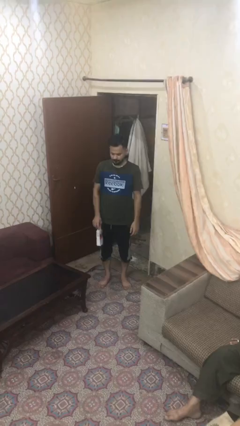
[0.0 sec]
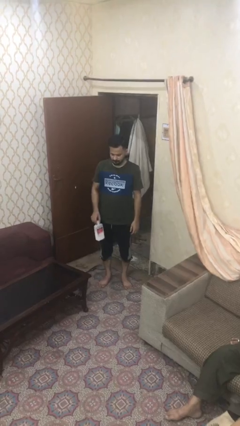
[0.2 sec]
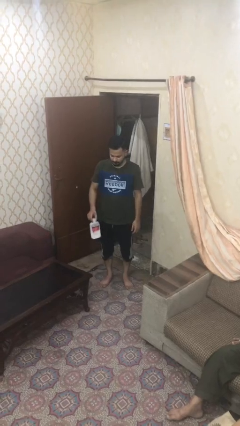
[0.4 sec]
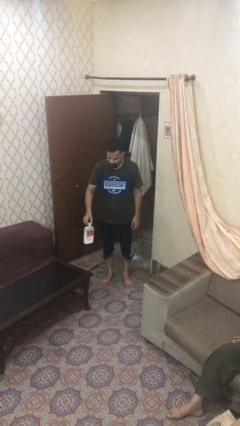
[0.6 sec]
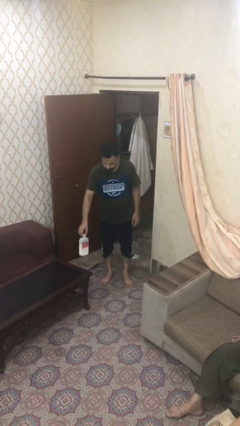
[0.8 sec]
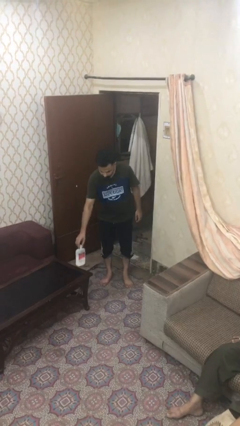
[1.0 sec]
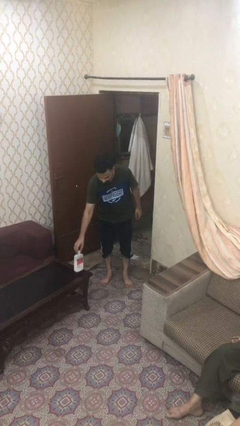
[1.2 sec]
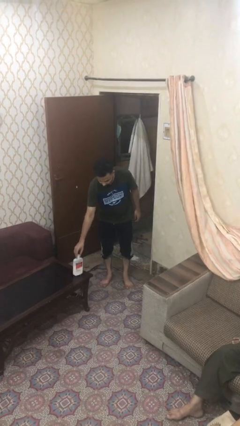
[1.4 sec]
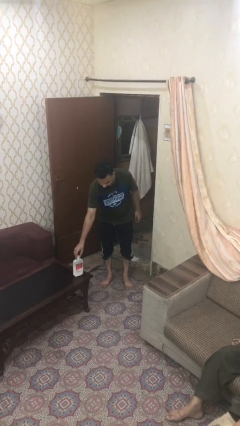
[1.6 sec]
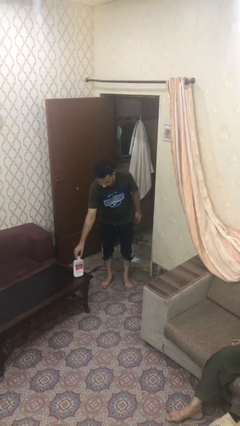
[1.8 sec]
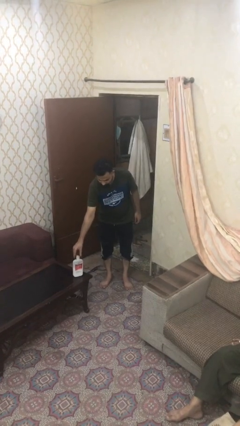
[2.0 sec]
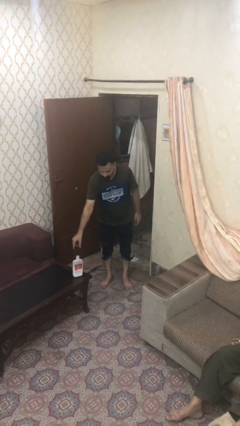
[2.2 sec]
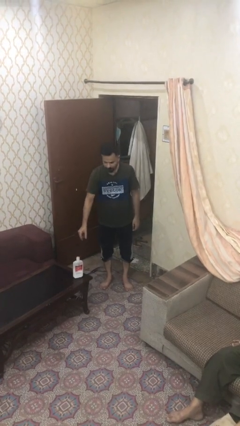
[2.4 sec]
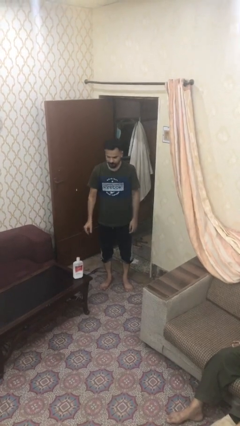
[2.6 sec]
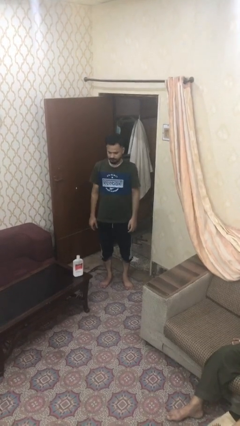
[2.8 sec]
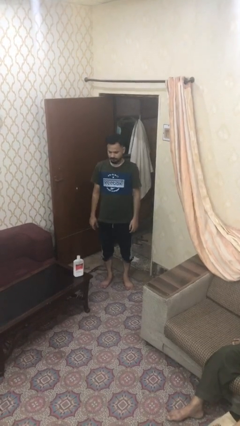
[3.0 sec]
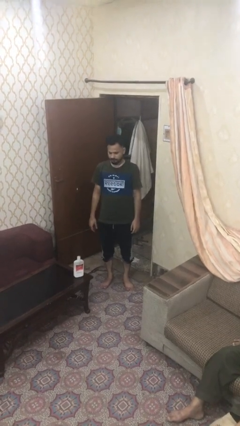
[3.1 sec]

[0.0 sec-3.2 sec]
person puts down object on table

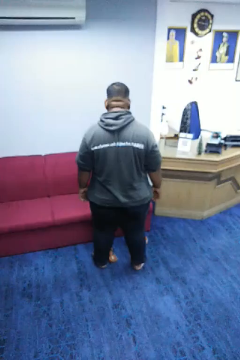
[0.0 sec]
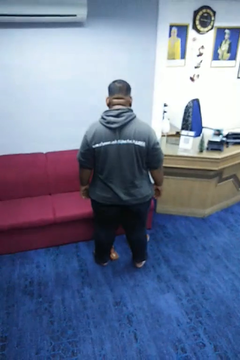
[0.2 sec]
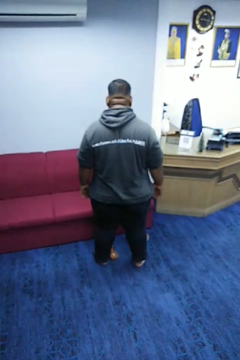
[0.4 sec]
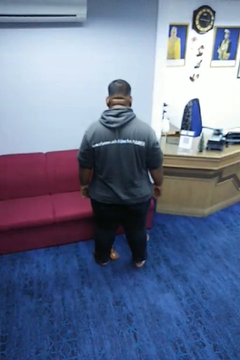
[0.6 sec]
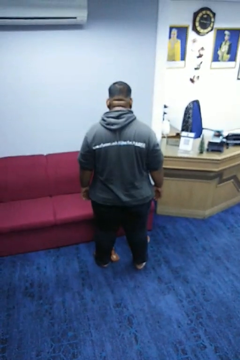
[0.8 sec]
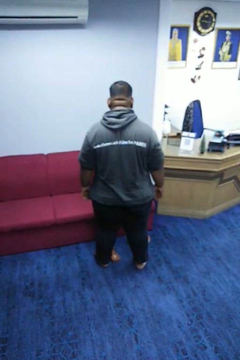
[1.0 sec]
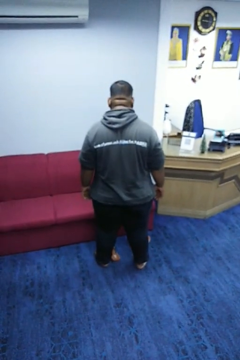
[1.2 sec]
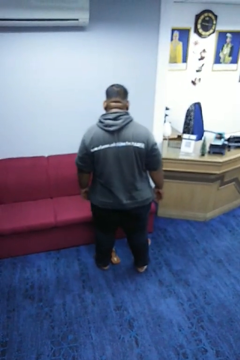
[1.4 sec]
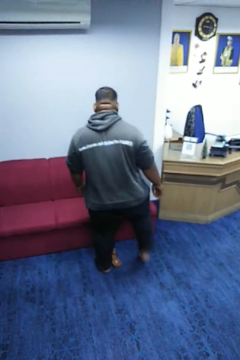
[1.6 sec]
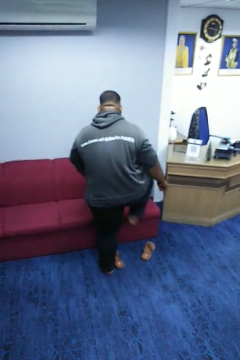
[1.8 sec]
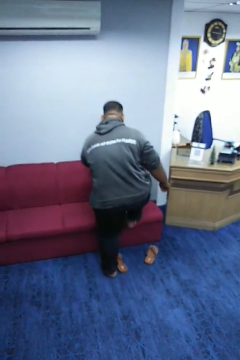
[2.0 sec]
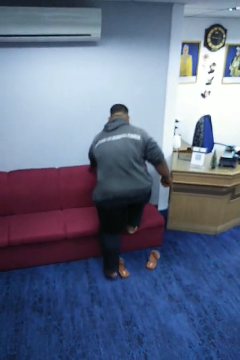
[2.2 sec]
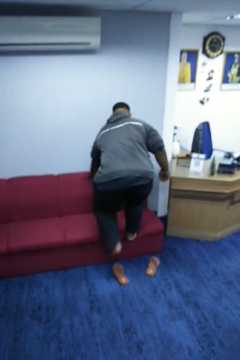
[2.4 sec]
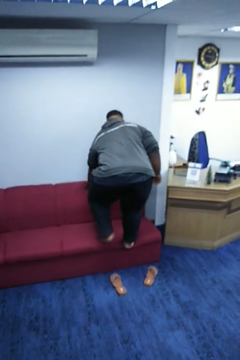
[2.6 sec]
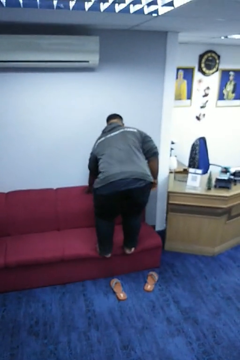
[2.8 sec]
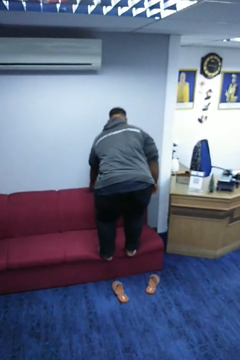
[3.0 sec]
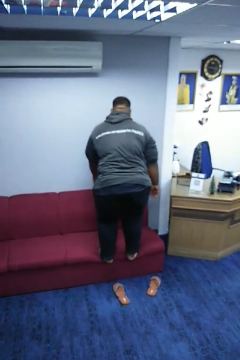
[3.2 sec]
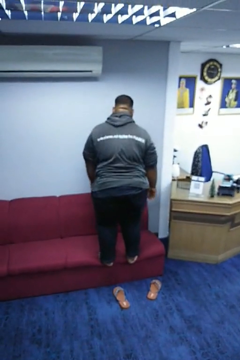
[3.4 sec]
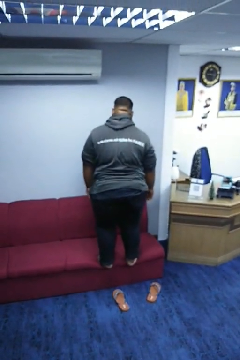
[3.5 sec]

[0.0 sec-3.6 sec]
person climbs on couch

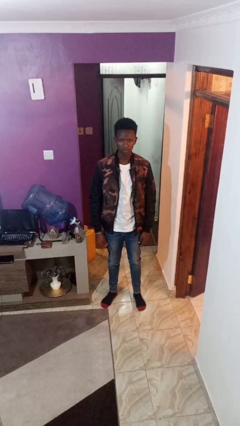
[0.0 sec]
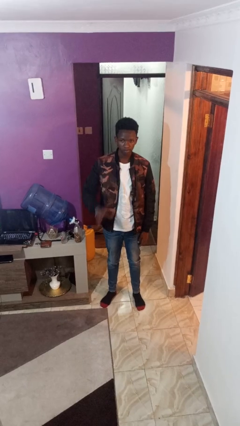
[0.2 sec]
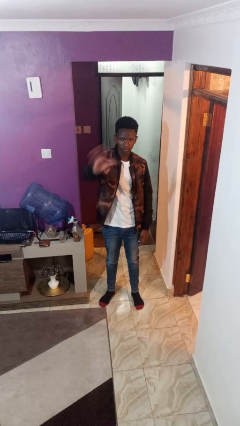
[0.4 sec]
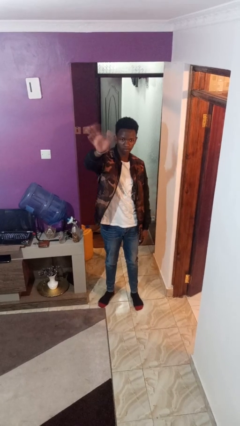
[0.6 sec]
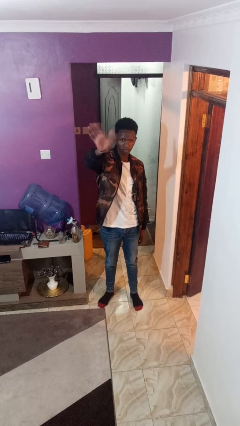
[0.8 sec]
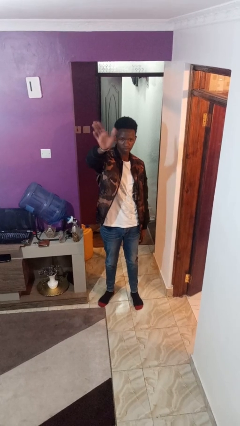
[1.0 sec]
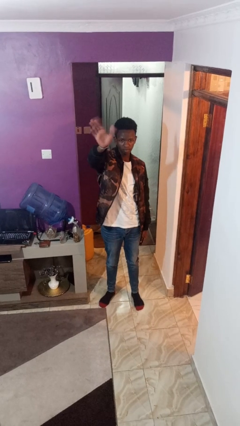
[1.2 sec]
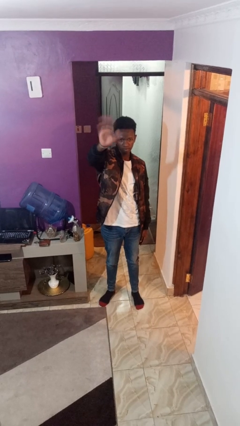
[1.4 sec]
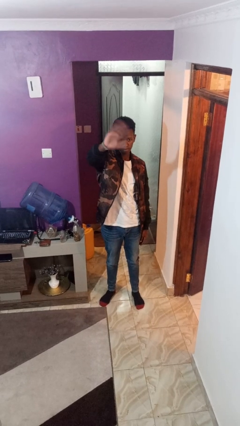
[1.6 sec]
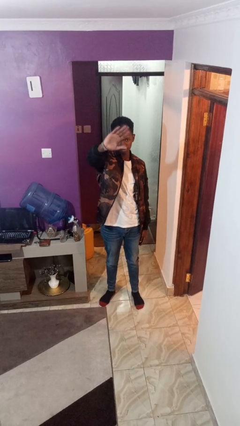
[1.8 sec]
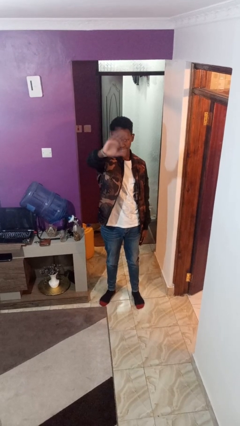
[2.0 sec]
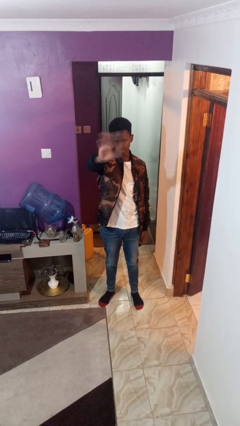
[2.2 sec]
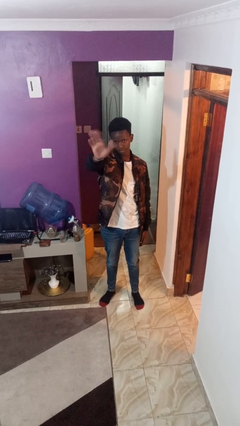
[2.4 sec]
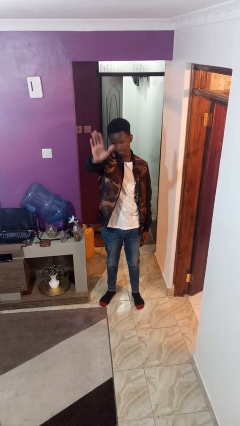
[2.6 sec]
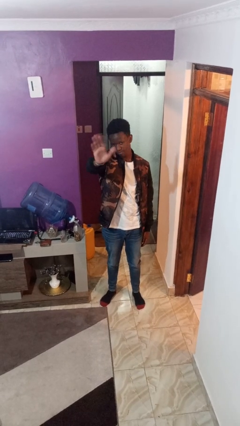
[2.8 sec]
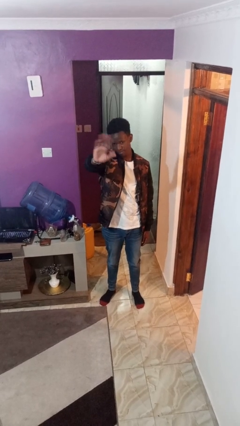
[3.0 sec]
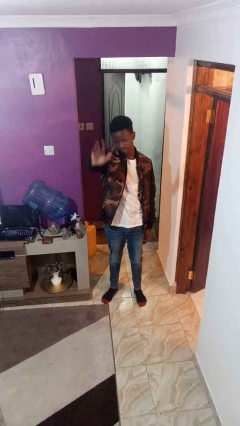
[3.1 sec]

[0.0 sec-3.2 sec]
person waves at person

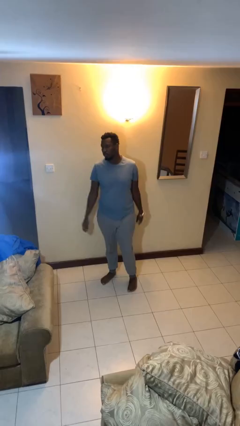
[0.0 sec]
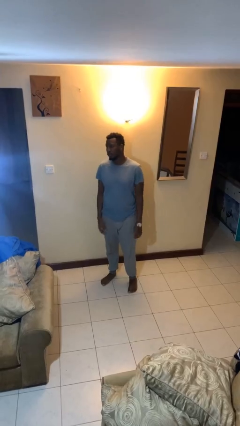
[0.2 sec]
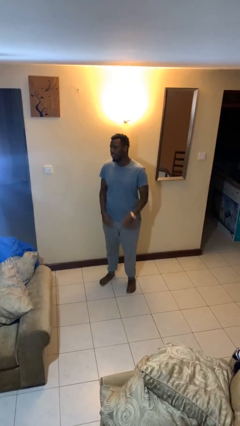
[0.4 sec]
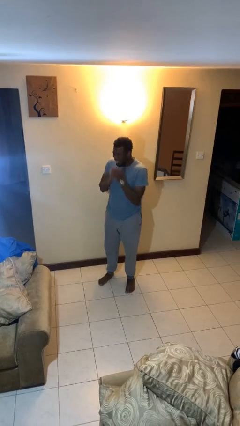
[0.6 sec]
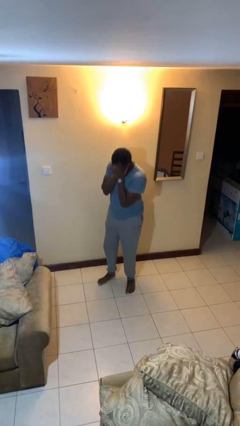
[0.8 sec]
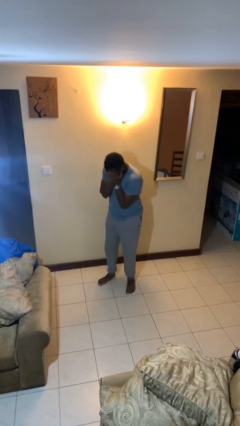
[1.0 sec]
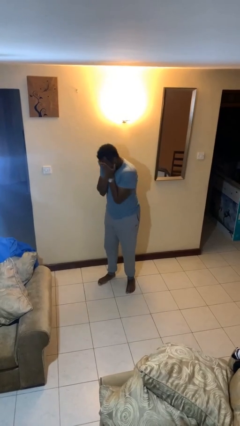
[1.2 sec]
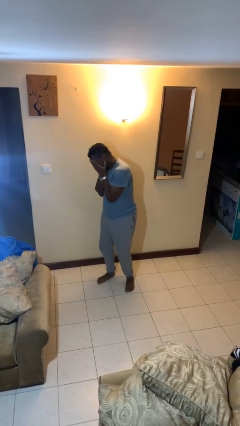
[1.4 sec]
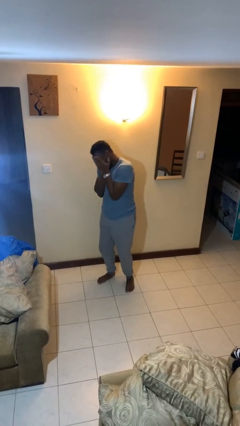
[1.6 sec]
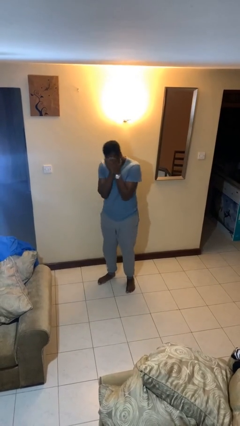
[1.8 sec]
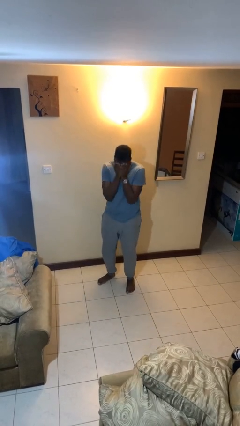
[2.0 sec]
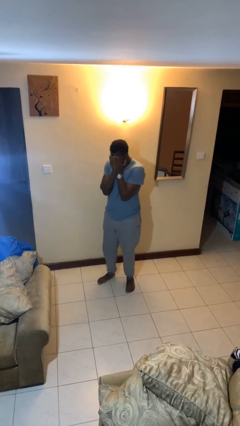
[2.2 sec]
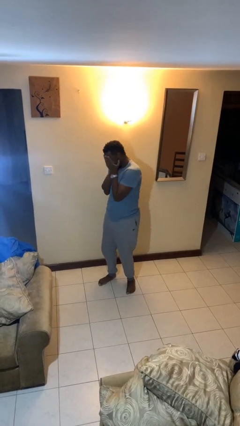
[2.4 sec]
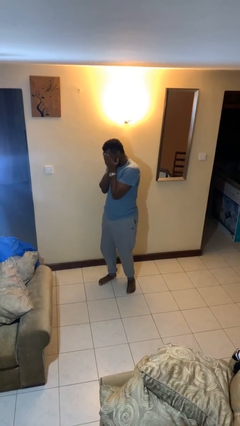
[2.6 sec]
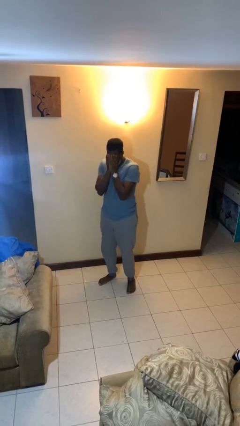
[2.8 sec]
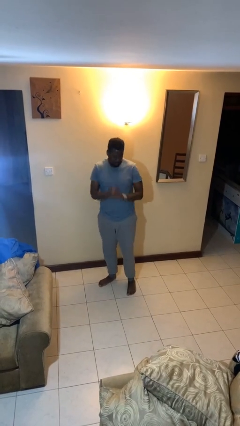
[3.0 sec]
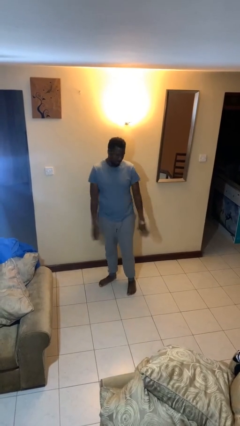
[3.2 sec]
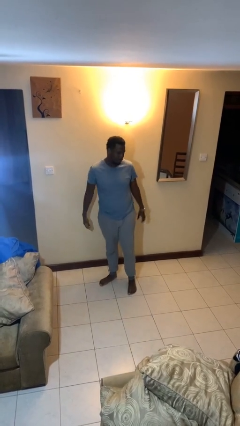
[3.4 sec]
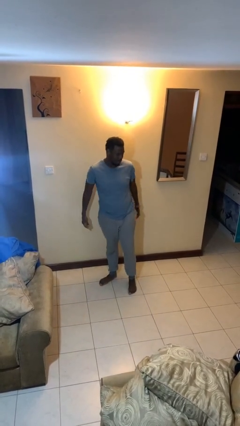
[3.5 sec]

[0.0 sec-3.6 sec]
person covers face with hands

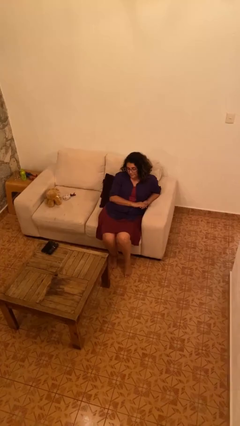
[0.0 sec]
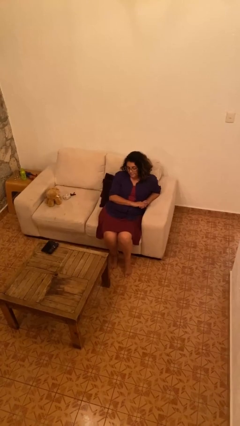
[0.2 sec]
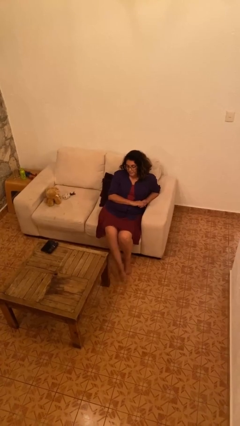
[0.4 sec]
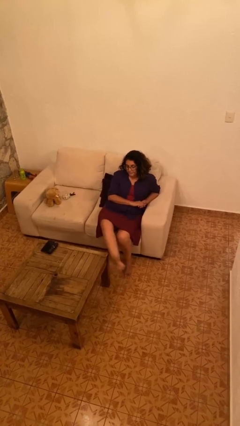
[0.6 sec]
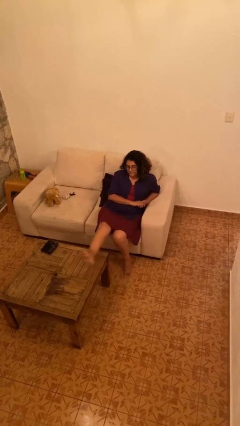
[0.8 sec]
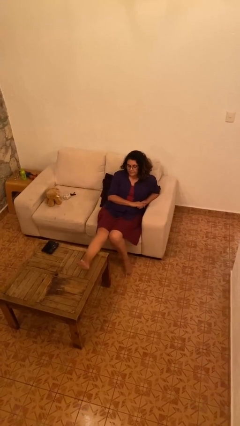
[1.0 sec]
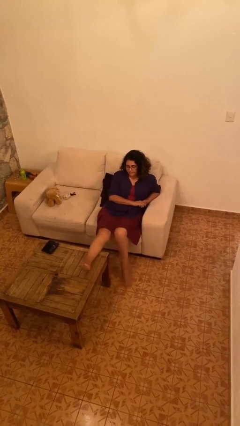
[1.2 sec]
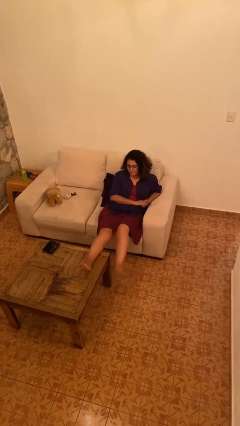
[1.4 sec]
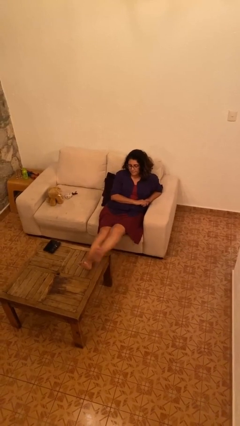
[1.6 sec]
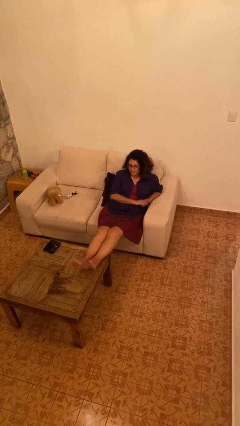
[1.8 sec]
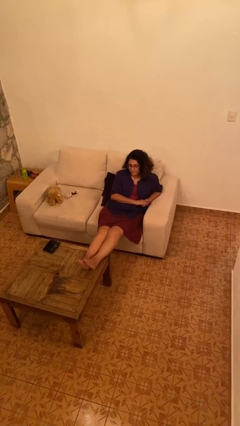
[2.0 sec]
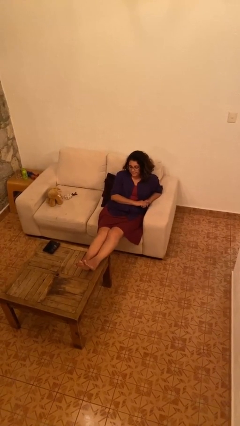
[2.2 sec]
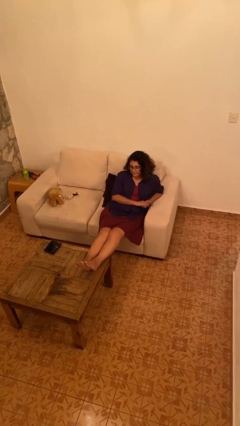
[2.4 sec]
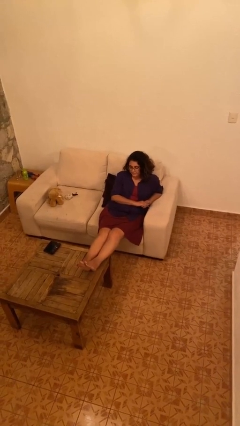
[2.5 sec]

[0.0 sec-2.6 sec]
person puts feet up

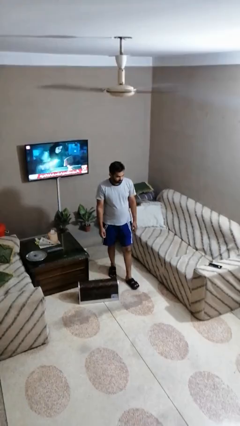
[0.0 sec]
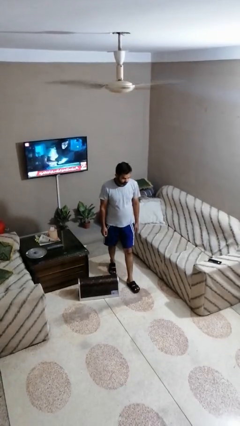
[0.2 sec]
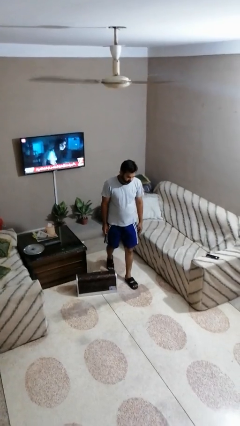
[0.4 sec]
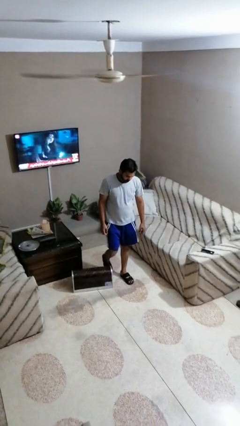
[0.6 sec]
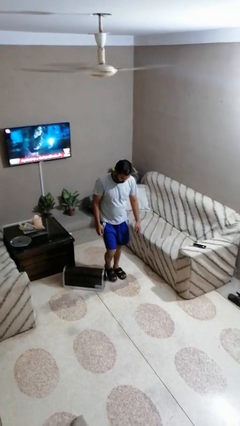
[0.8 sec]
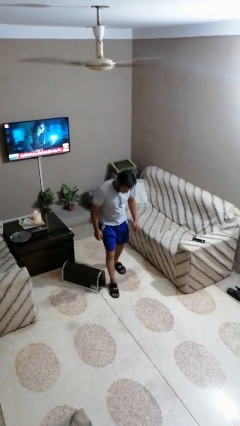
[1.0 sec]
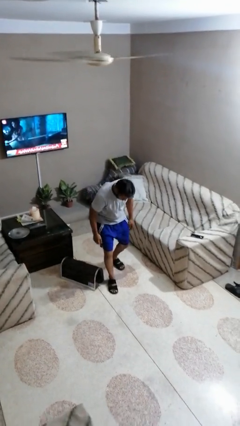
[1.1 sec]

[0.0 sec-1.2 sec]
person trips on object on floor

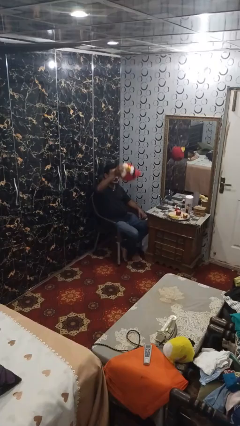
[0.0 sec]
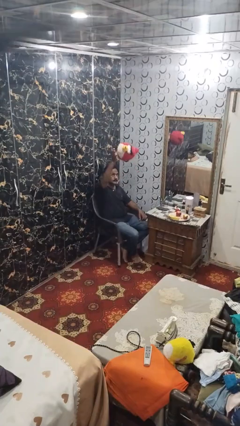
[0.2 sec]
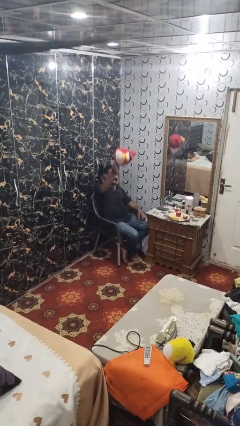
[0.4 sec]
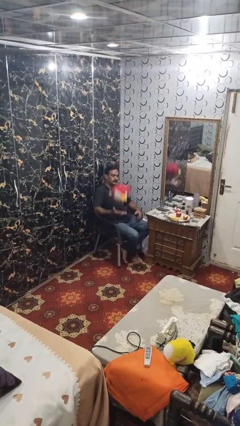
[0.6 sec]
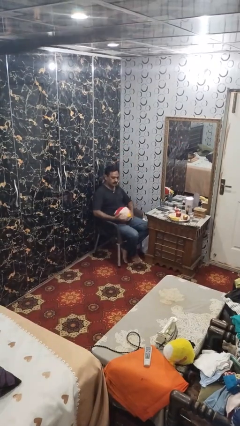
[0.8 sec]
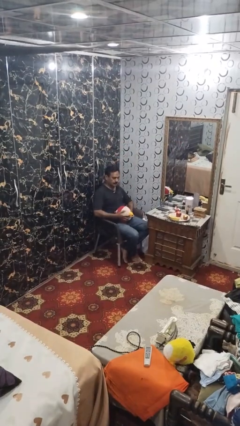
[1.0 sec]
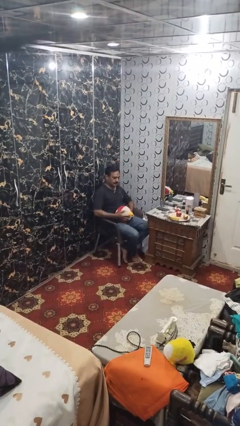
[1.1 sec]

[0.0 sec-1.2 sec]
person drops object
